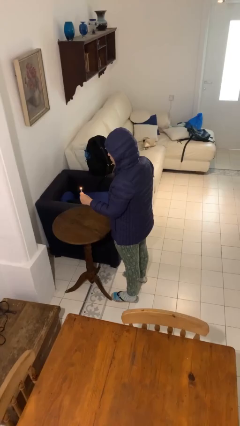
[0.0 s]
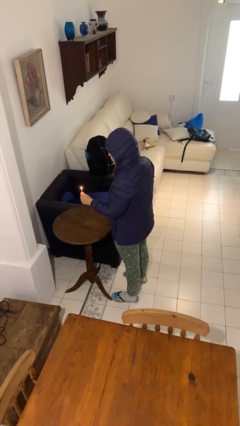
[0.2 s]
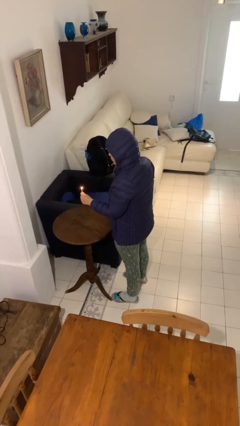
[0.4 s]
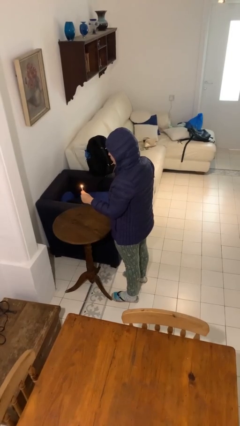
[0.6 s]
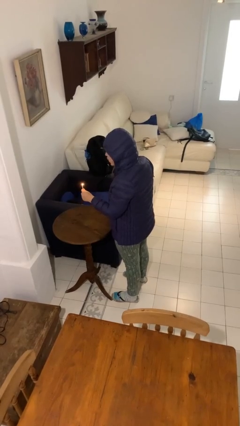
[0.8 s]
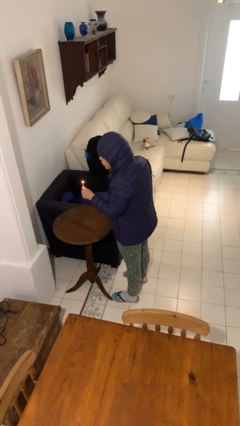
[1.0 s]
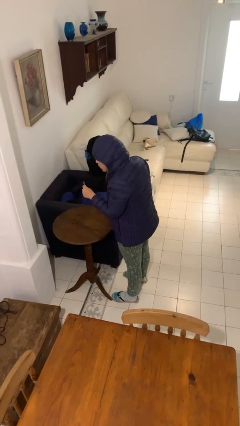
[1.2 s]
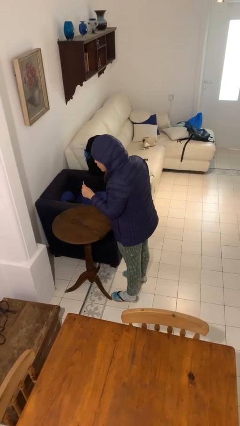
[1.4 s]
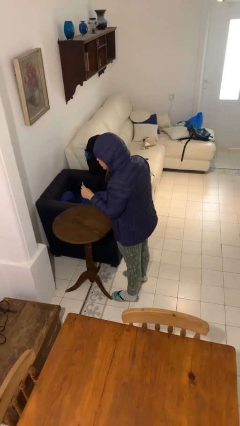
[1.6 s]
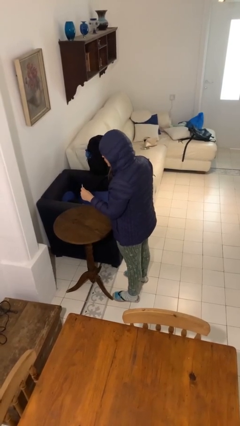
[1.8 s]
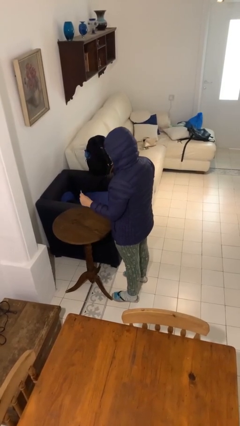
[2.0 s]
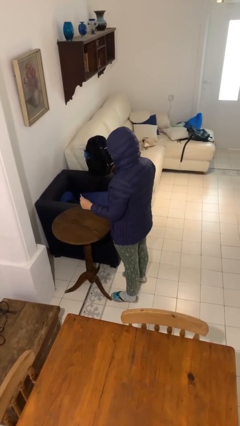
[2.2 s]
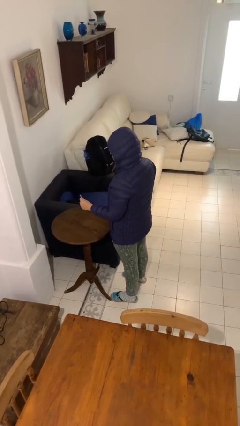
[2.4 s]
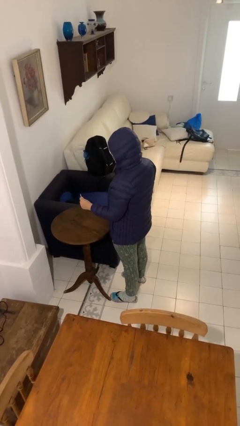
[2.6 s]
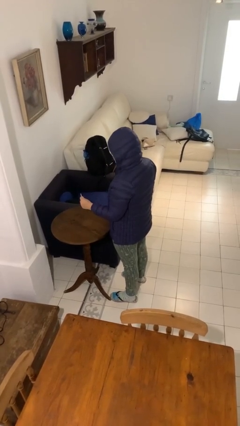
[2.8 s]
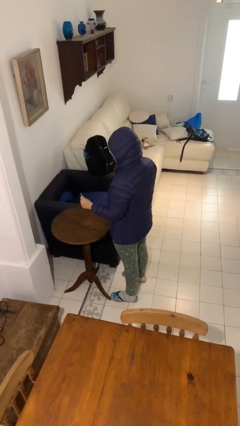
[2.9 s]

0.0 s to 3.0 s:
person extinguishes candle

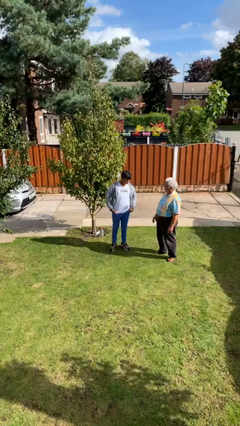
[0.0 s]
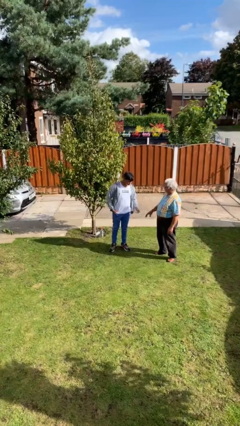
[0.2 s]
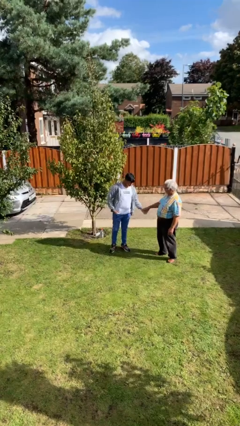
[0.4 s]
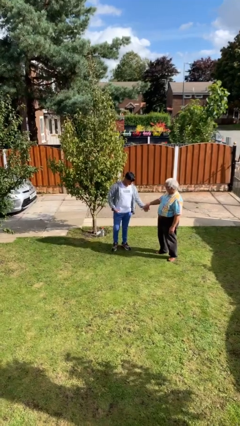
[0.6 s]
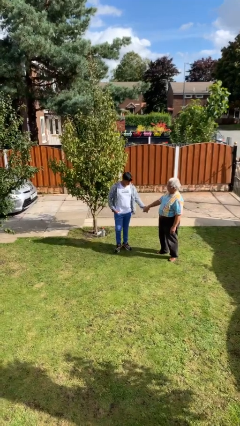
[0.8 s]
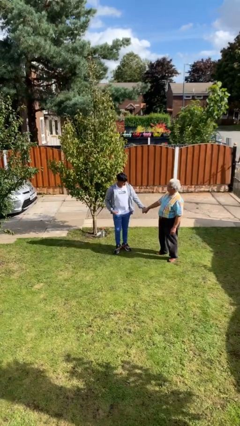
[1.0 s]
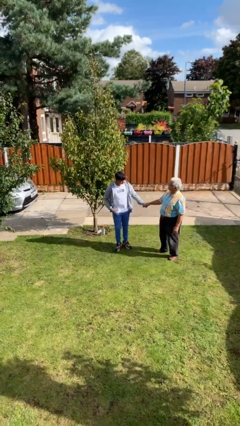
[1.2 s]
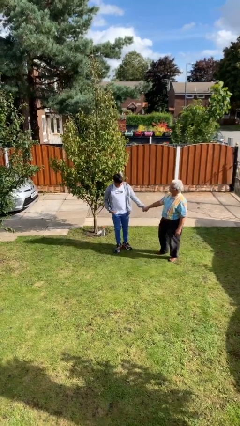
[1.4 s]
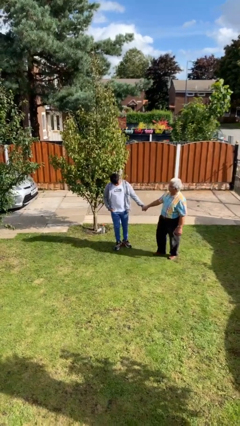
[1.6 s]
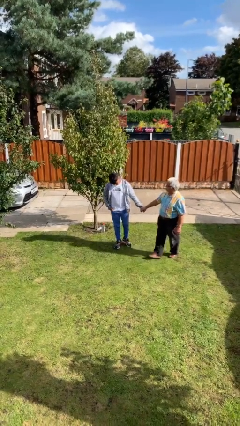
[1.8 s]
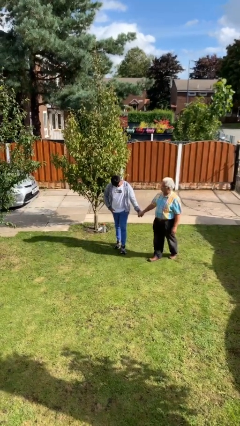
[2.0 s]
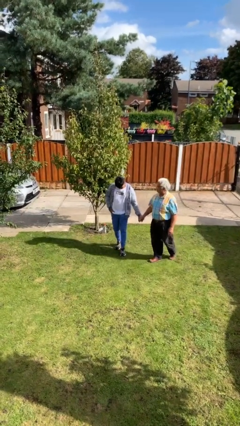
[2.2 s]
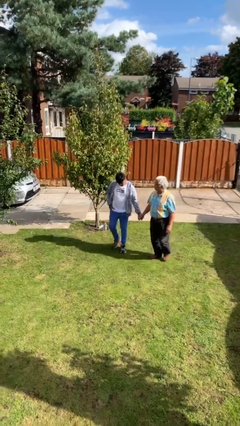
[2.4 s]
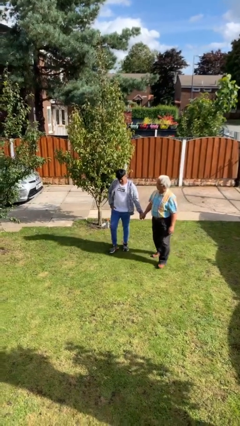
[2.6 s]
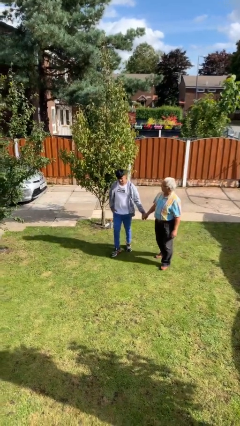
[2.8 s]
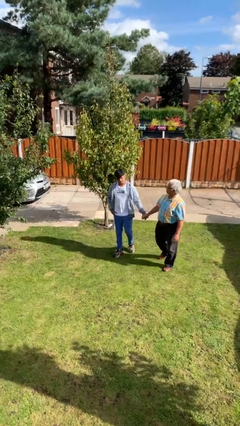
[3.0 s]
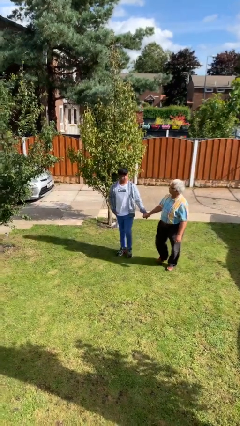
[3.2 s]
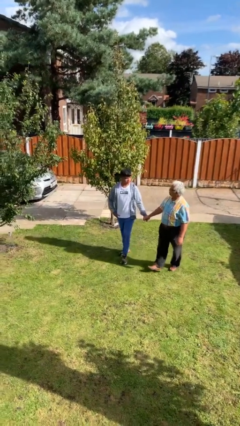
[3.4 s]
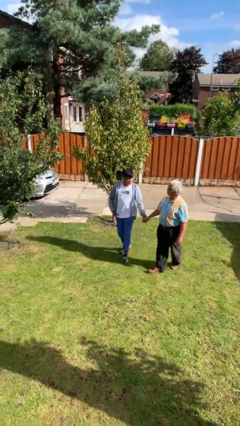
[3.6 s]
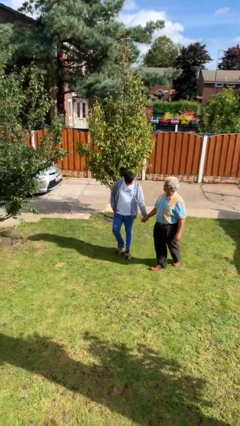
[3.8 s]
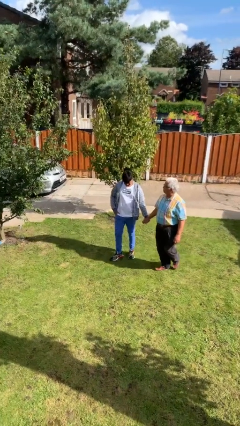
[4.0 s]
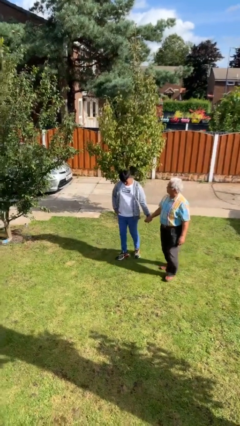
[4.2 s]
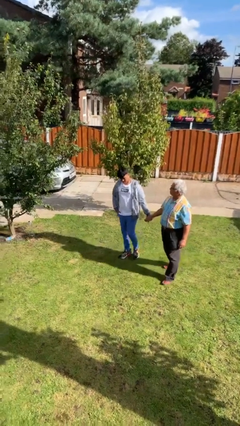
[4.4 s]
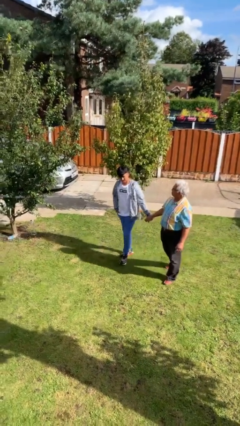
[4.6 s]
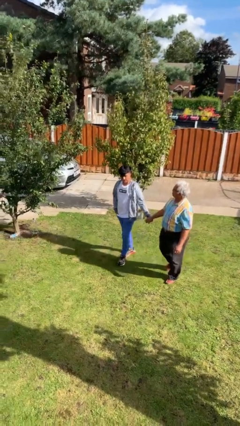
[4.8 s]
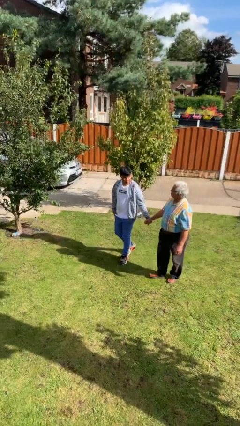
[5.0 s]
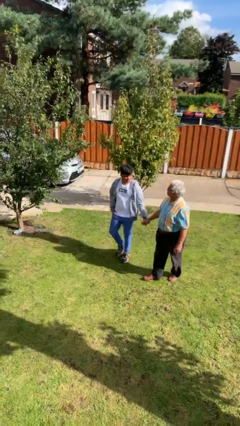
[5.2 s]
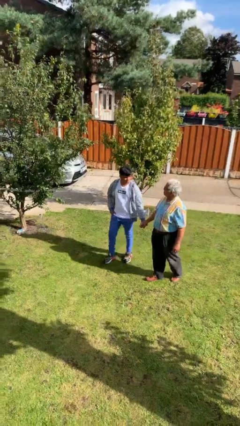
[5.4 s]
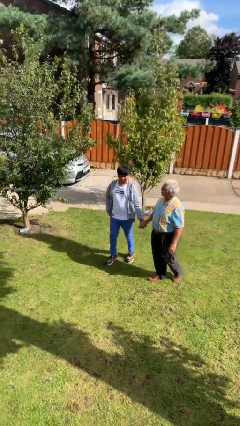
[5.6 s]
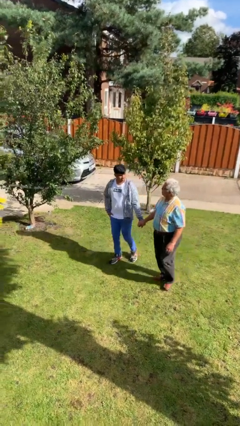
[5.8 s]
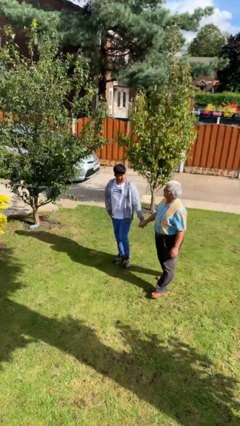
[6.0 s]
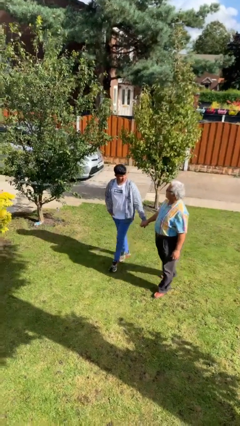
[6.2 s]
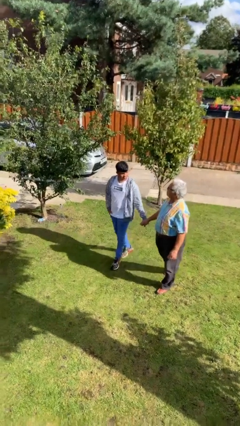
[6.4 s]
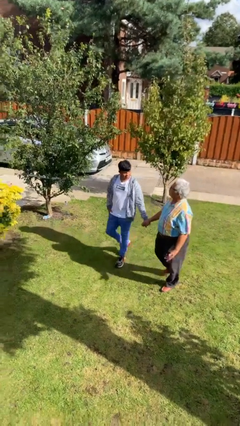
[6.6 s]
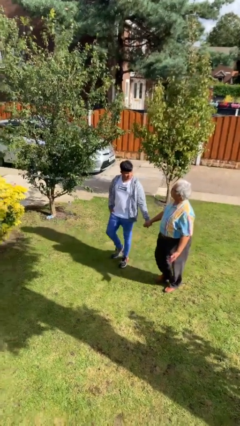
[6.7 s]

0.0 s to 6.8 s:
person holds hand

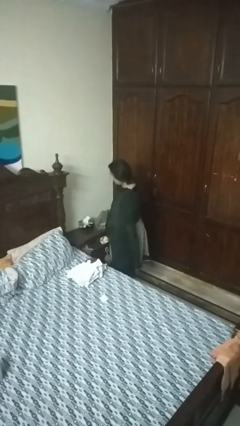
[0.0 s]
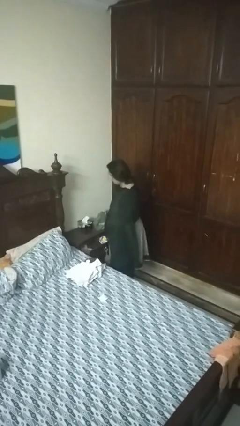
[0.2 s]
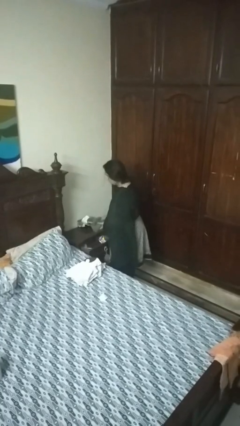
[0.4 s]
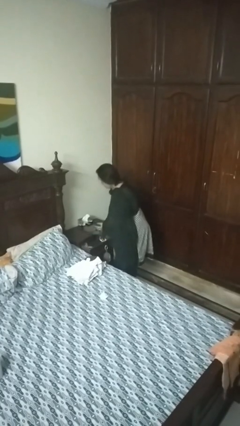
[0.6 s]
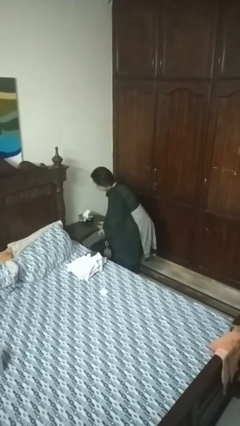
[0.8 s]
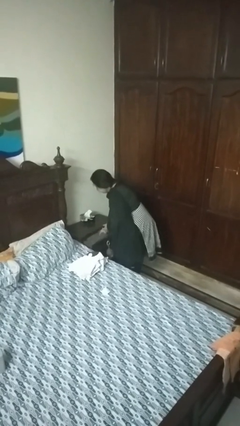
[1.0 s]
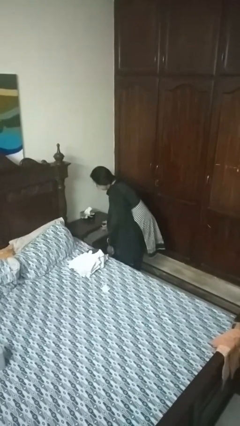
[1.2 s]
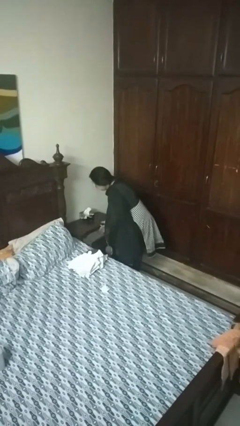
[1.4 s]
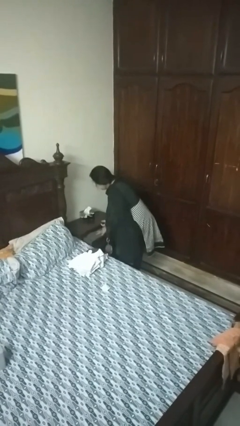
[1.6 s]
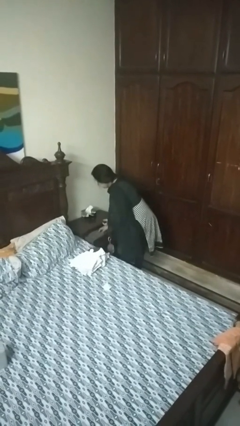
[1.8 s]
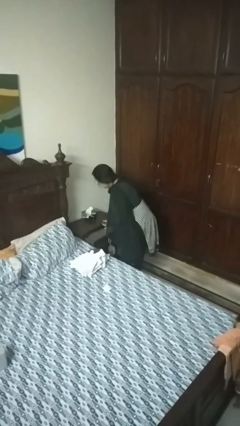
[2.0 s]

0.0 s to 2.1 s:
person puts clothes into dresser

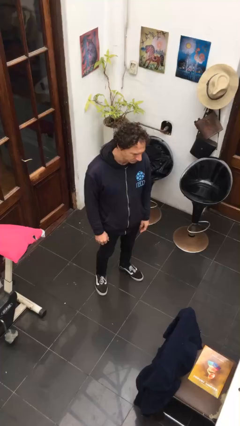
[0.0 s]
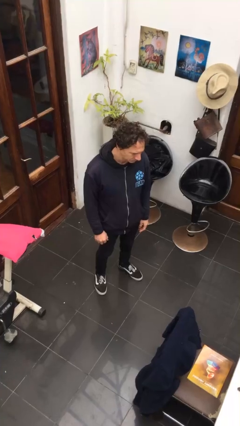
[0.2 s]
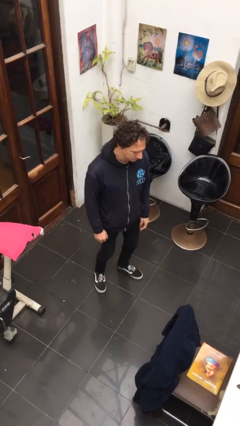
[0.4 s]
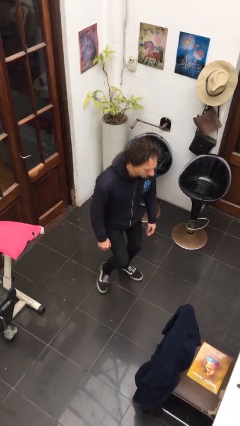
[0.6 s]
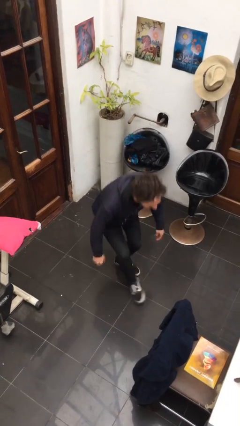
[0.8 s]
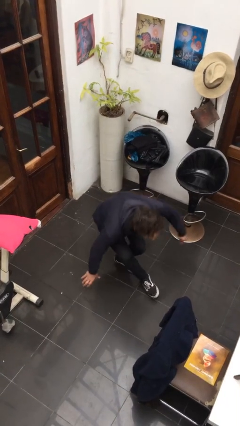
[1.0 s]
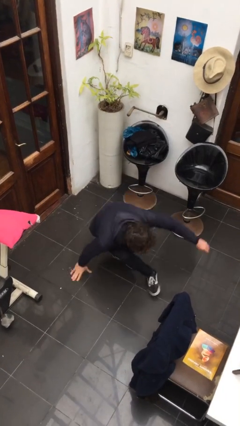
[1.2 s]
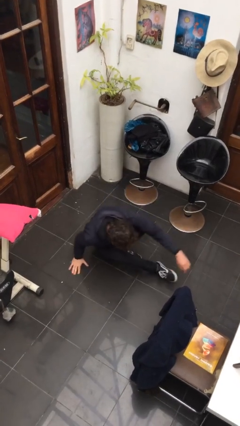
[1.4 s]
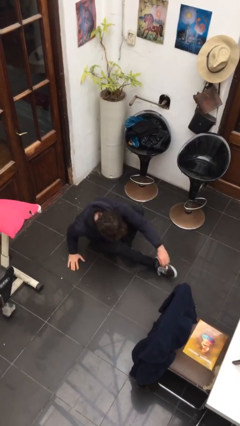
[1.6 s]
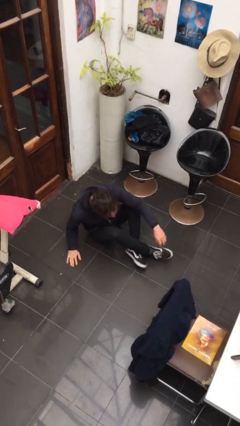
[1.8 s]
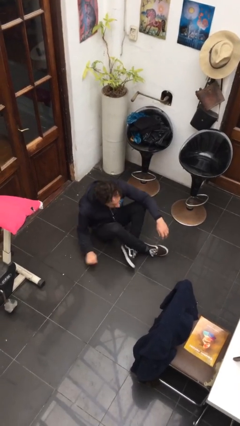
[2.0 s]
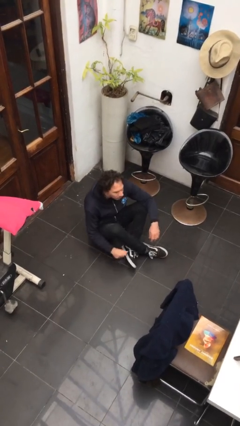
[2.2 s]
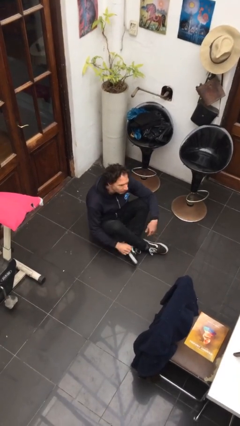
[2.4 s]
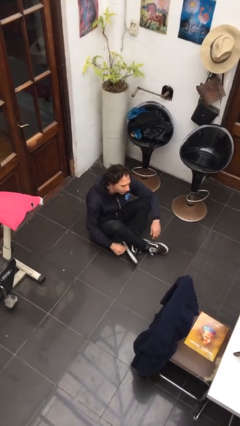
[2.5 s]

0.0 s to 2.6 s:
person sits crisscross

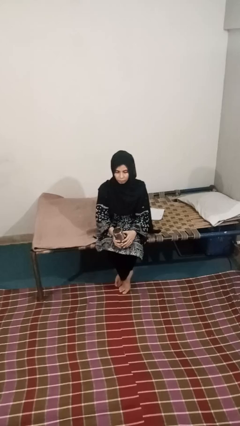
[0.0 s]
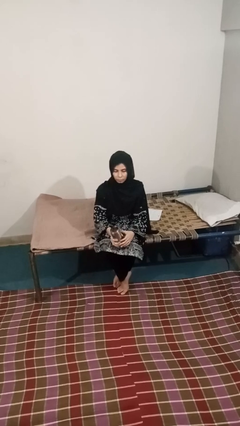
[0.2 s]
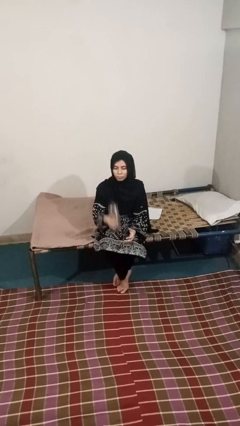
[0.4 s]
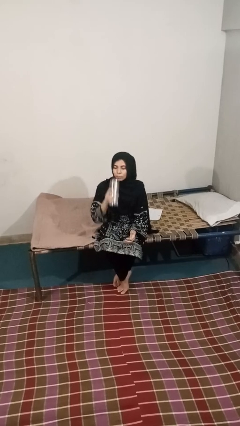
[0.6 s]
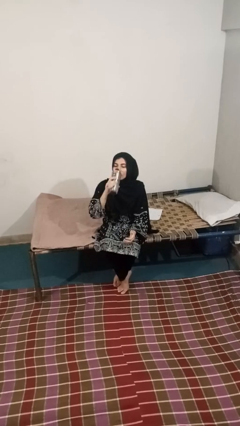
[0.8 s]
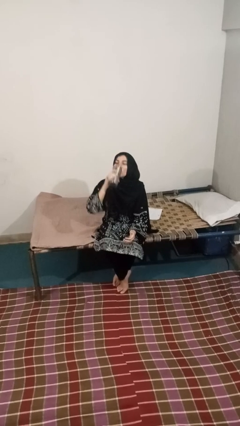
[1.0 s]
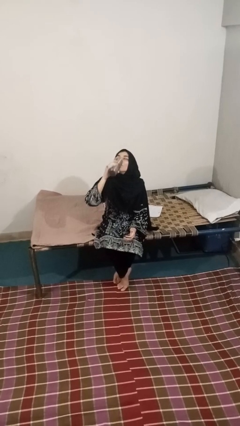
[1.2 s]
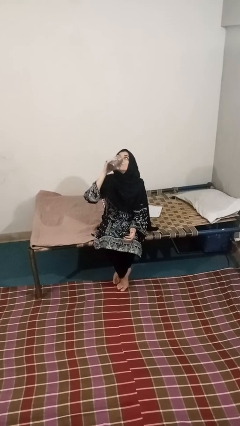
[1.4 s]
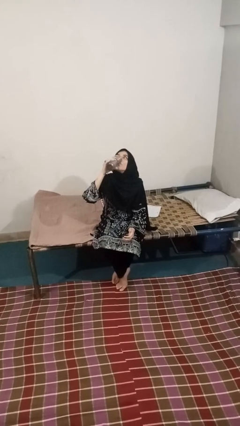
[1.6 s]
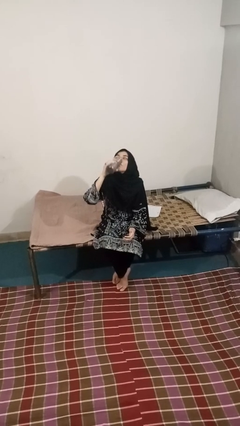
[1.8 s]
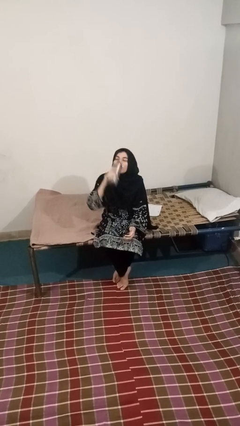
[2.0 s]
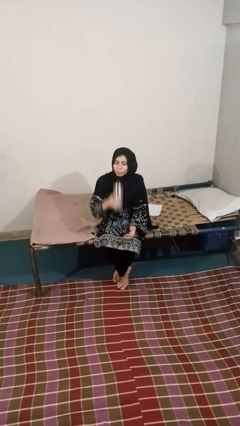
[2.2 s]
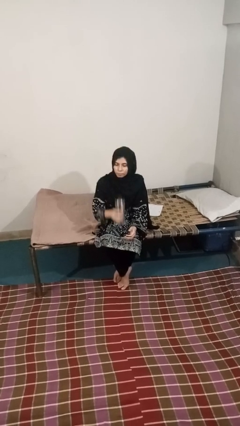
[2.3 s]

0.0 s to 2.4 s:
person drinks from beverage can

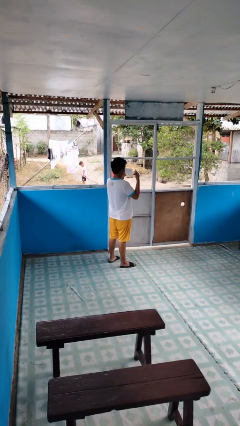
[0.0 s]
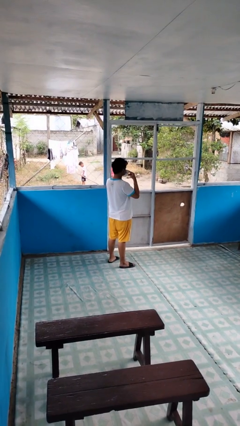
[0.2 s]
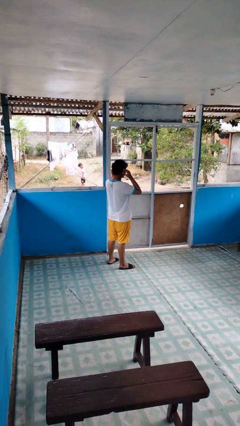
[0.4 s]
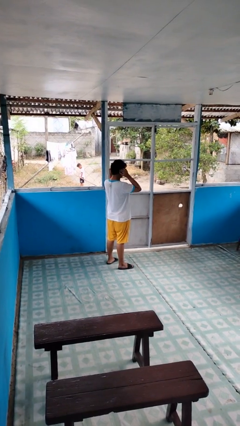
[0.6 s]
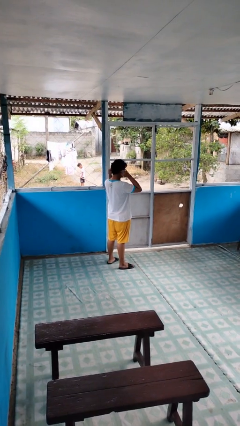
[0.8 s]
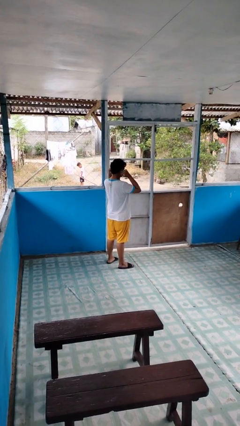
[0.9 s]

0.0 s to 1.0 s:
person puts on facemask
